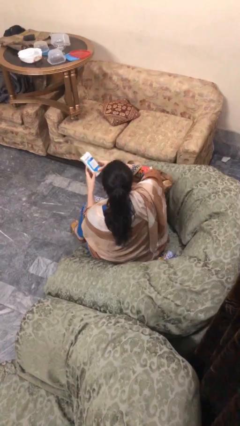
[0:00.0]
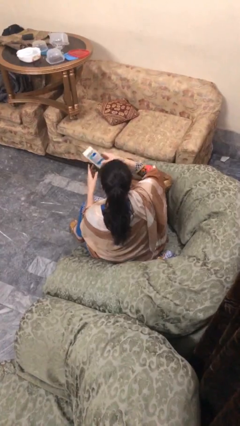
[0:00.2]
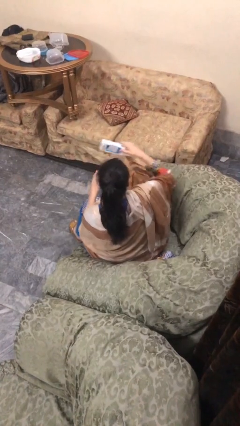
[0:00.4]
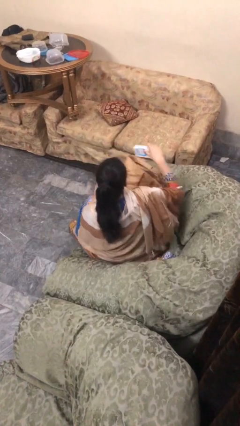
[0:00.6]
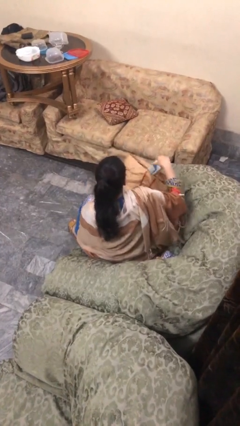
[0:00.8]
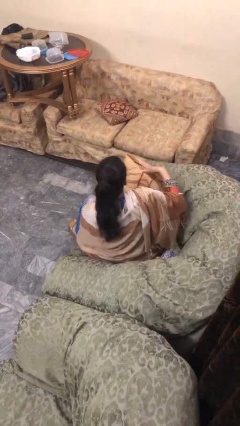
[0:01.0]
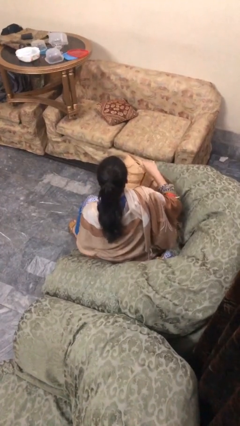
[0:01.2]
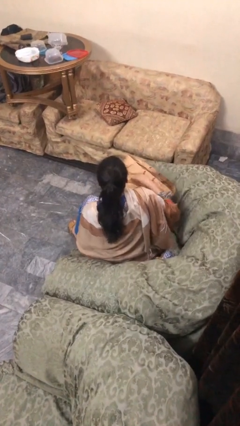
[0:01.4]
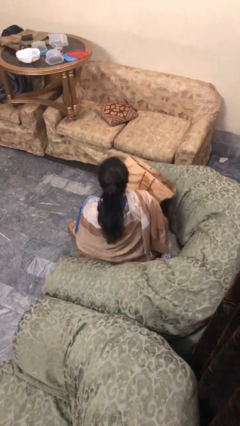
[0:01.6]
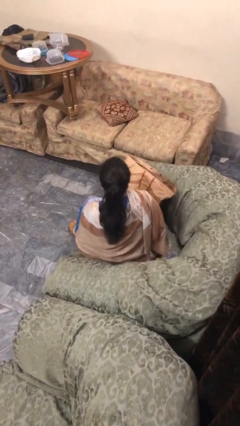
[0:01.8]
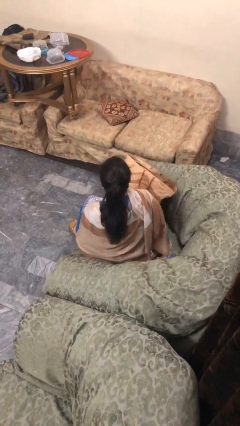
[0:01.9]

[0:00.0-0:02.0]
person puts object into bag

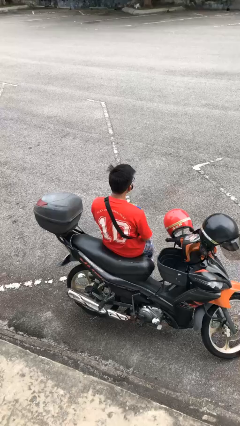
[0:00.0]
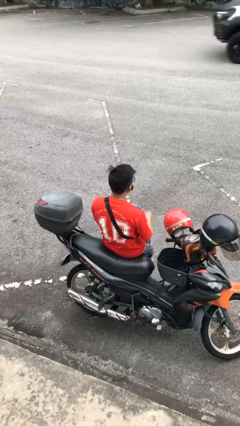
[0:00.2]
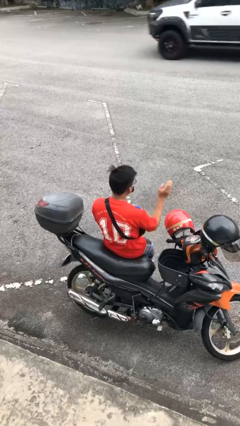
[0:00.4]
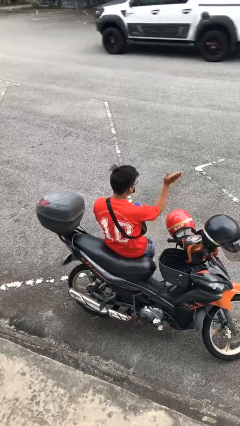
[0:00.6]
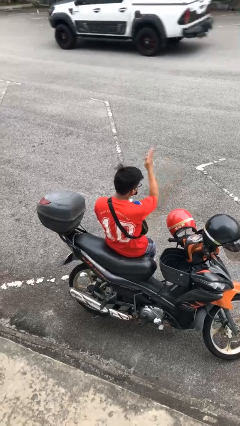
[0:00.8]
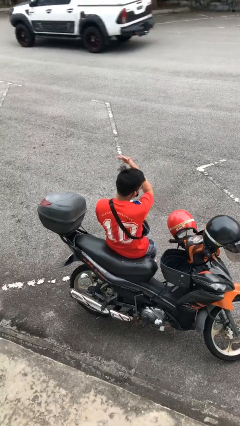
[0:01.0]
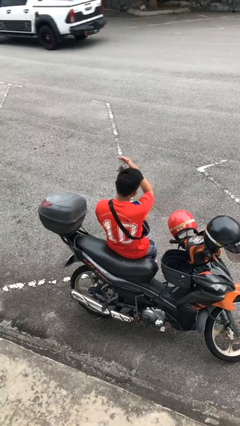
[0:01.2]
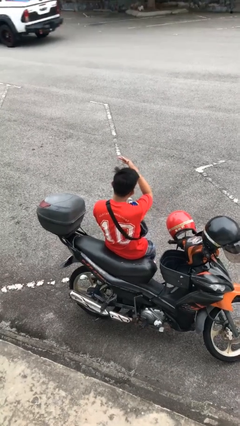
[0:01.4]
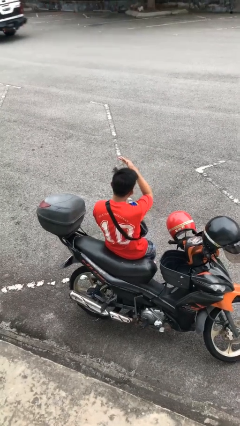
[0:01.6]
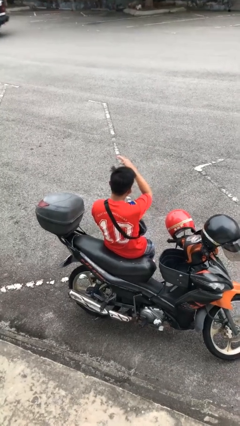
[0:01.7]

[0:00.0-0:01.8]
person gestures swipe left

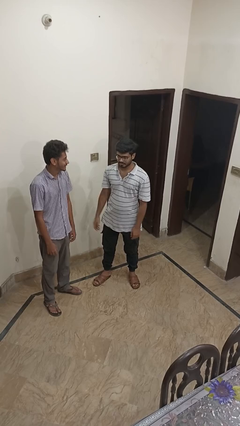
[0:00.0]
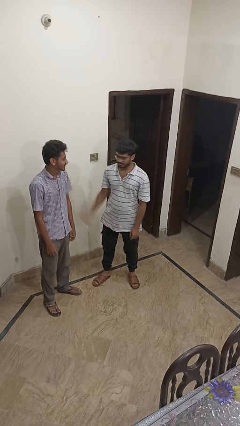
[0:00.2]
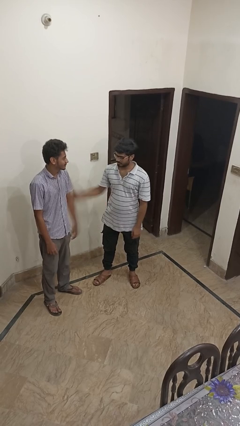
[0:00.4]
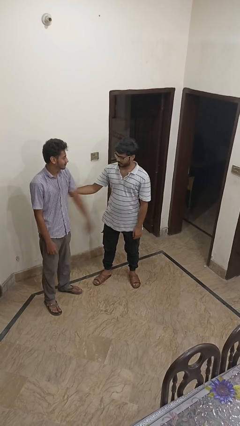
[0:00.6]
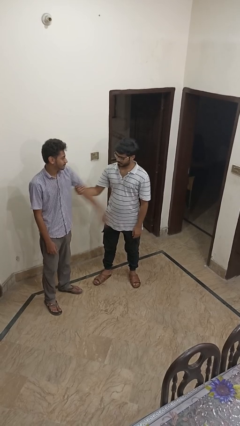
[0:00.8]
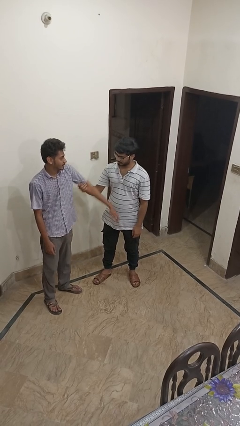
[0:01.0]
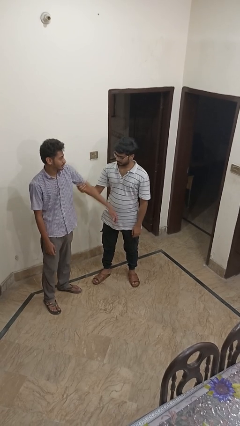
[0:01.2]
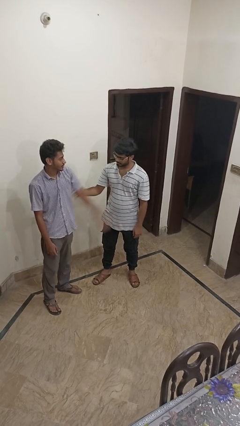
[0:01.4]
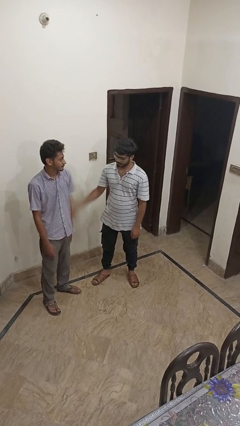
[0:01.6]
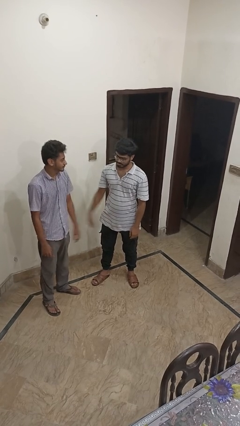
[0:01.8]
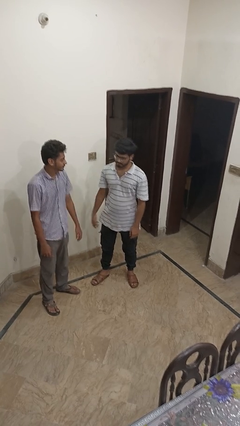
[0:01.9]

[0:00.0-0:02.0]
person grabs person by bicep

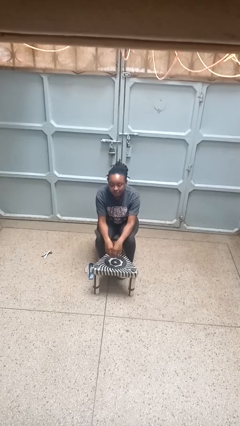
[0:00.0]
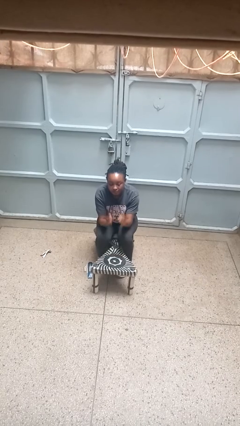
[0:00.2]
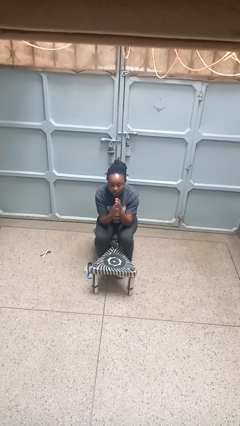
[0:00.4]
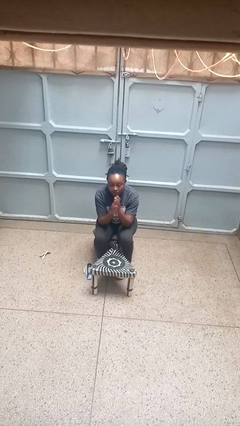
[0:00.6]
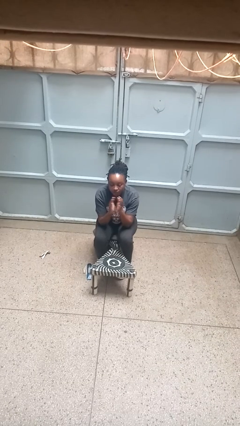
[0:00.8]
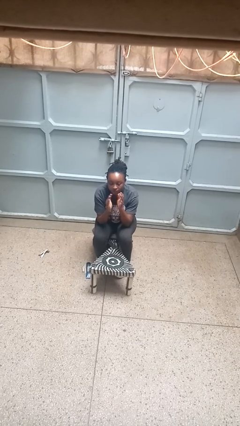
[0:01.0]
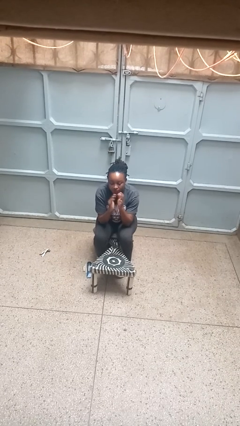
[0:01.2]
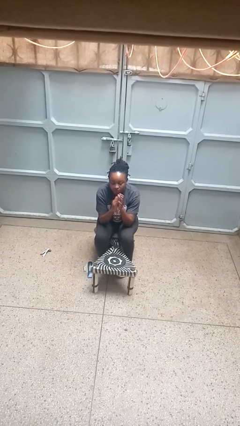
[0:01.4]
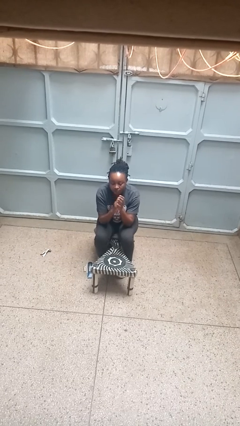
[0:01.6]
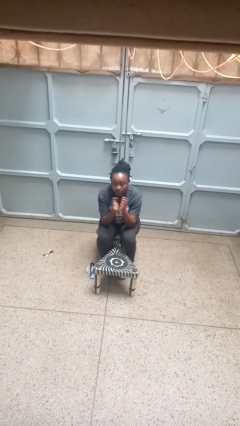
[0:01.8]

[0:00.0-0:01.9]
person claps hands

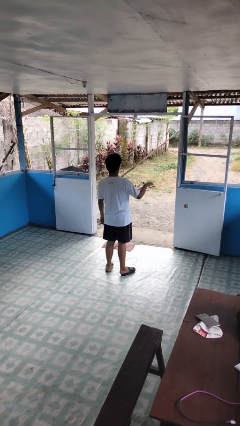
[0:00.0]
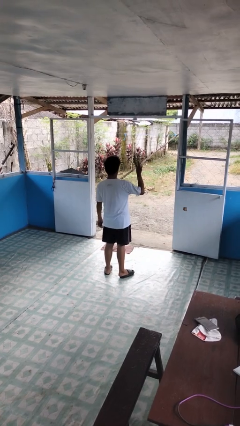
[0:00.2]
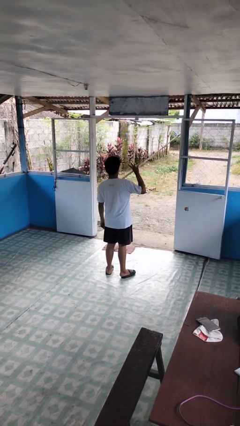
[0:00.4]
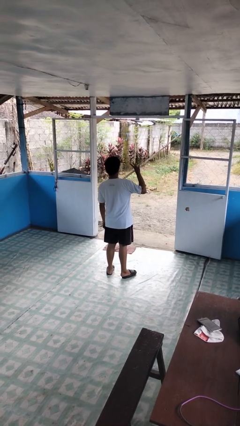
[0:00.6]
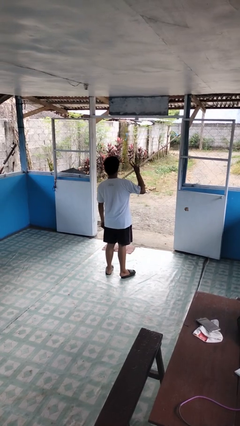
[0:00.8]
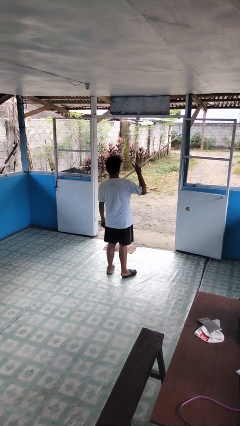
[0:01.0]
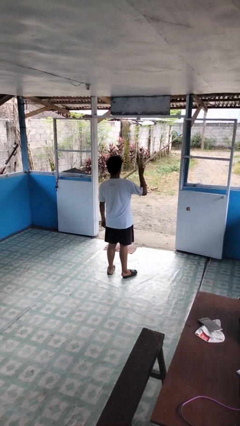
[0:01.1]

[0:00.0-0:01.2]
person gestures number four

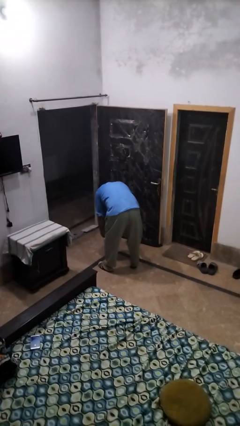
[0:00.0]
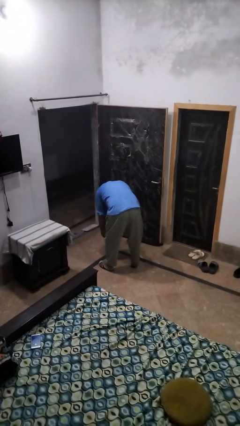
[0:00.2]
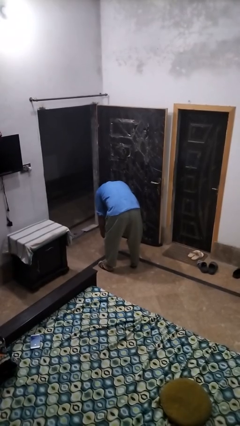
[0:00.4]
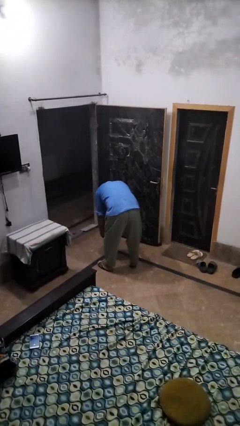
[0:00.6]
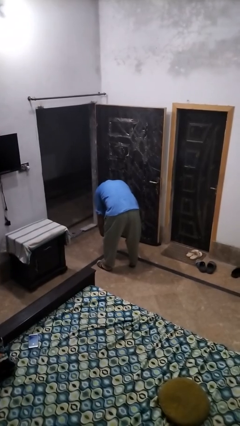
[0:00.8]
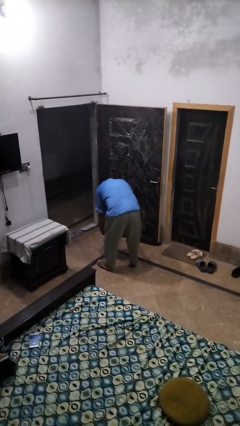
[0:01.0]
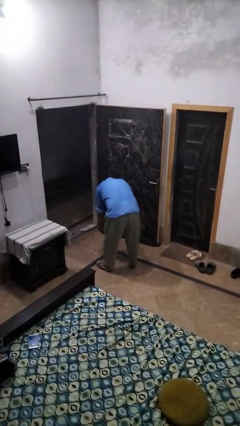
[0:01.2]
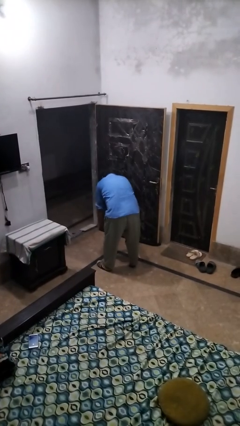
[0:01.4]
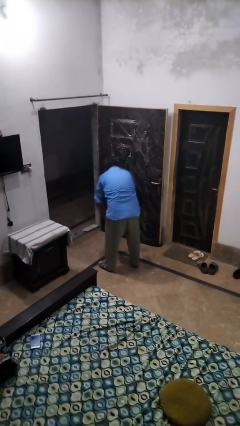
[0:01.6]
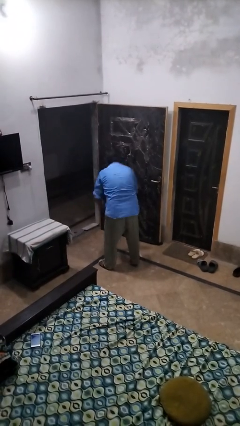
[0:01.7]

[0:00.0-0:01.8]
person catches dropped object

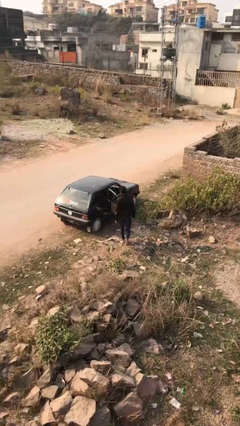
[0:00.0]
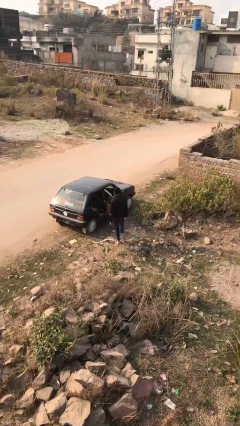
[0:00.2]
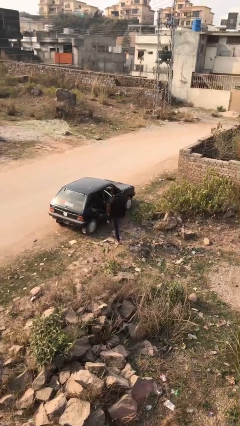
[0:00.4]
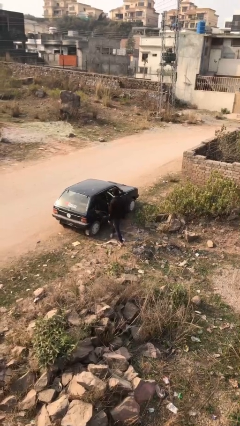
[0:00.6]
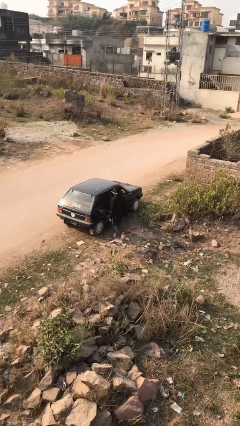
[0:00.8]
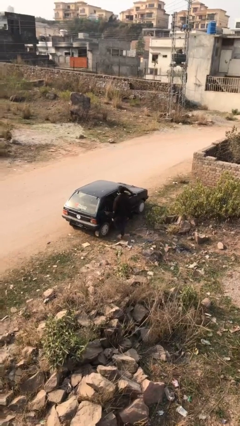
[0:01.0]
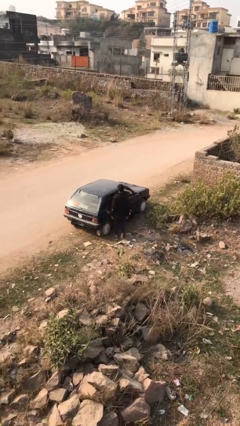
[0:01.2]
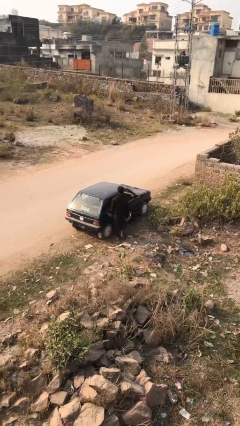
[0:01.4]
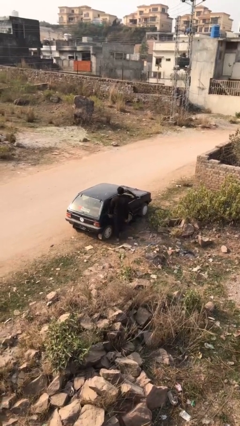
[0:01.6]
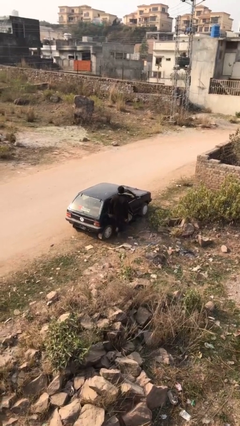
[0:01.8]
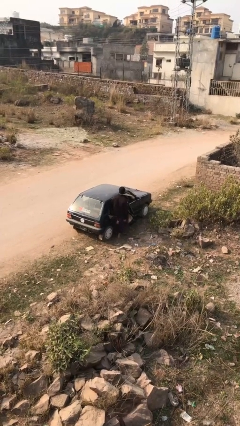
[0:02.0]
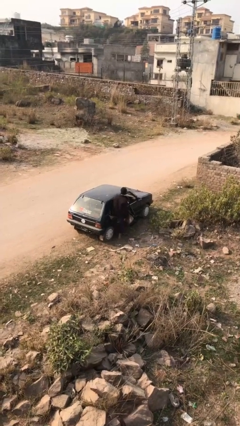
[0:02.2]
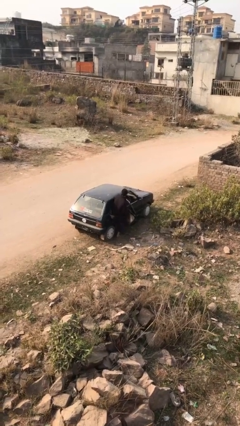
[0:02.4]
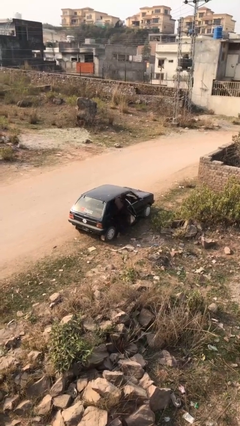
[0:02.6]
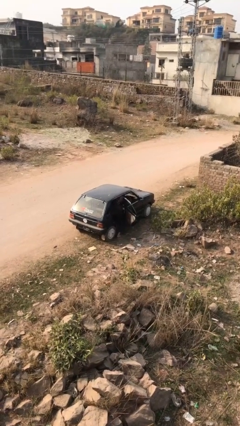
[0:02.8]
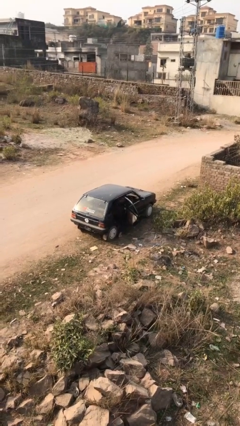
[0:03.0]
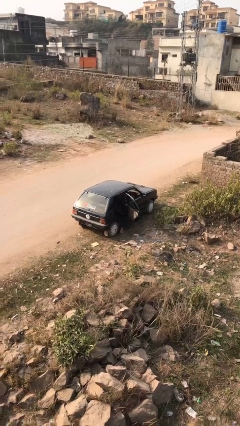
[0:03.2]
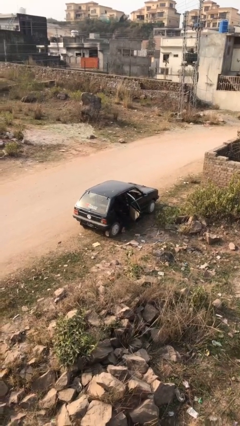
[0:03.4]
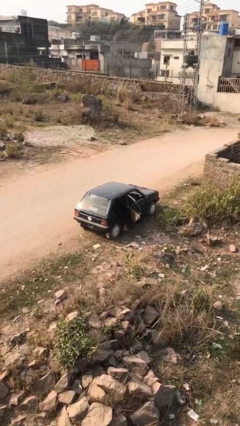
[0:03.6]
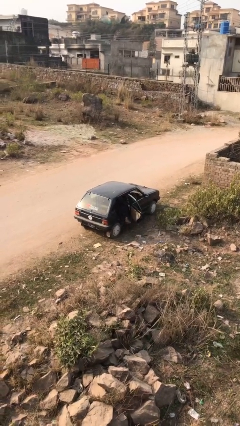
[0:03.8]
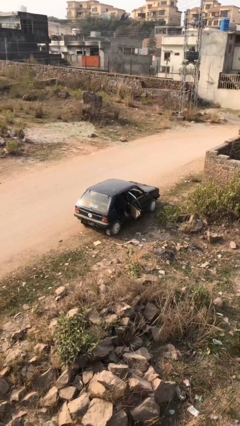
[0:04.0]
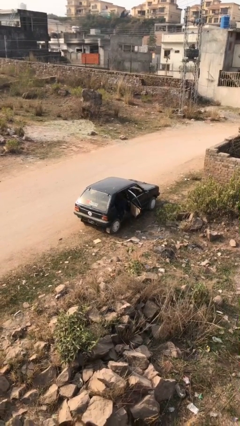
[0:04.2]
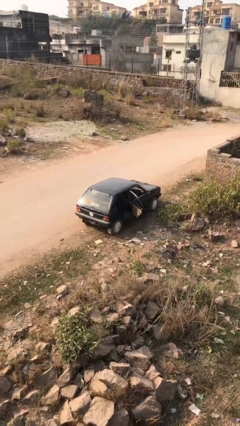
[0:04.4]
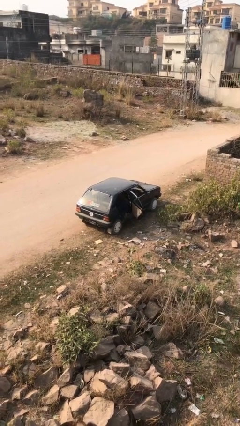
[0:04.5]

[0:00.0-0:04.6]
person enters car

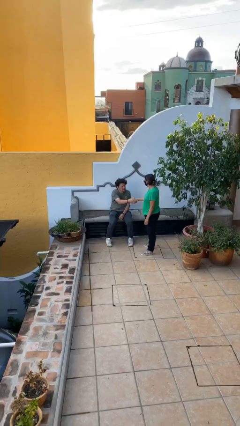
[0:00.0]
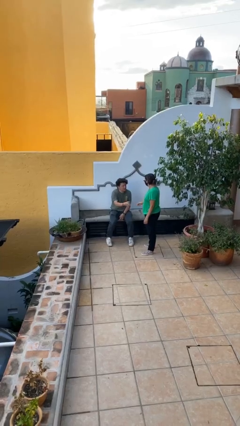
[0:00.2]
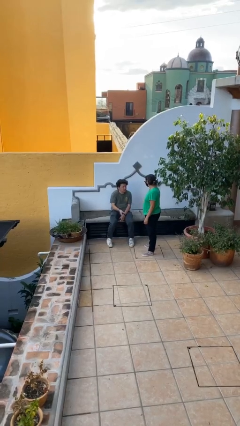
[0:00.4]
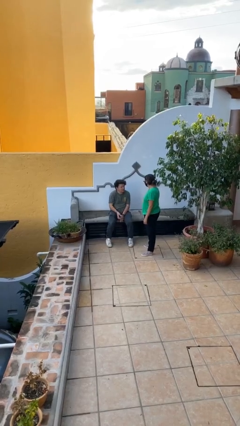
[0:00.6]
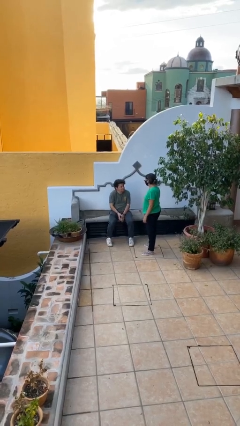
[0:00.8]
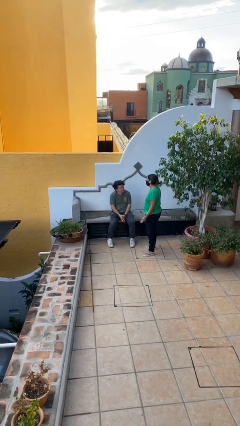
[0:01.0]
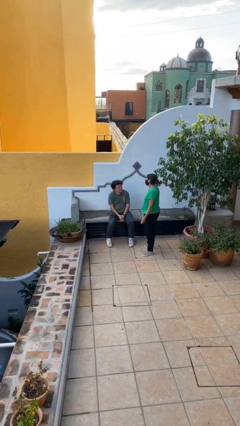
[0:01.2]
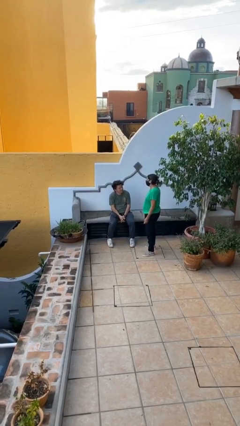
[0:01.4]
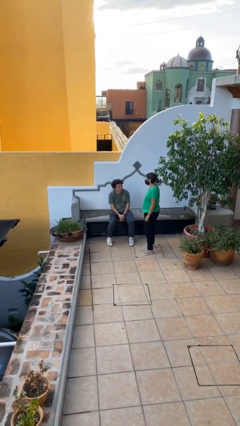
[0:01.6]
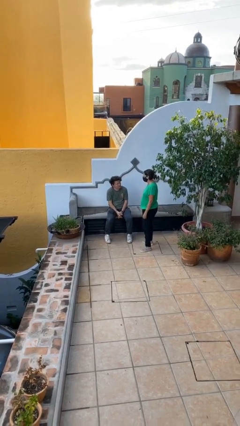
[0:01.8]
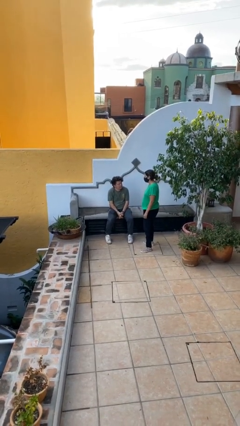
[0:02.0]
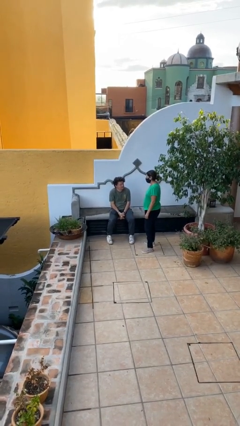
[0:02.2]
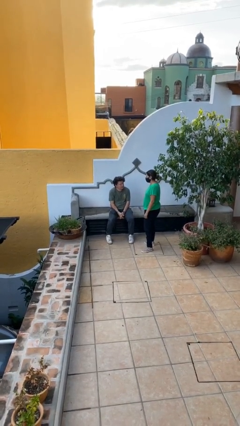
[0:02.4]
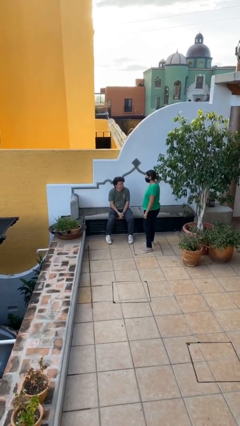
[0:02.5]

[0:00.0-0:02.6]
person talks to person
